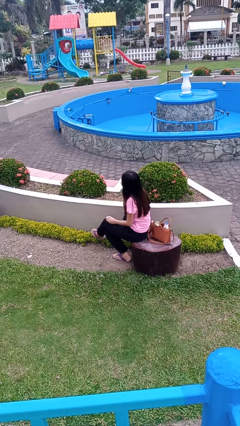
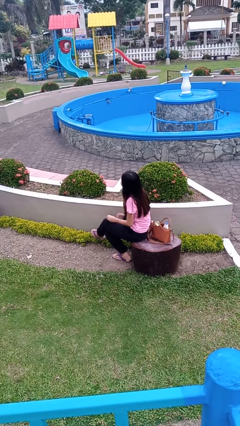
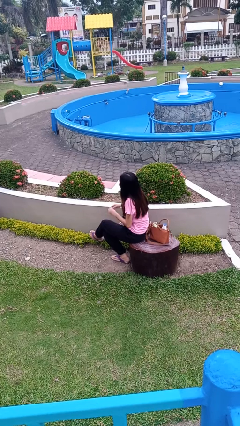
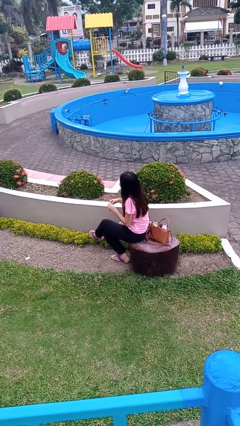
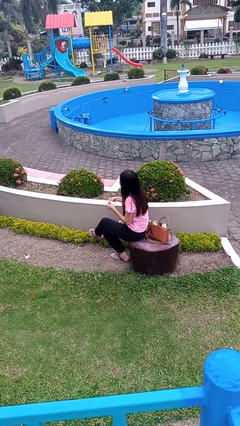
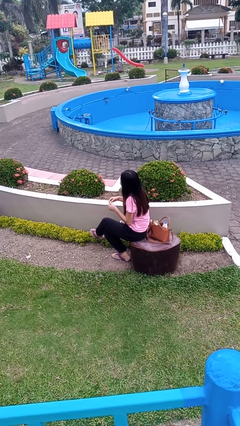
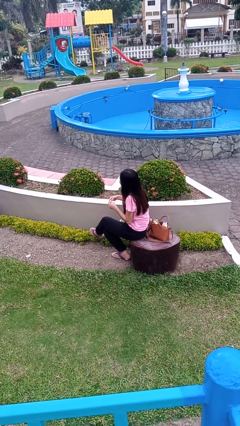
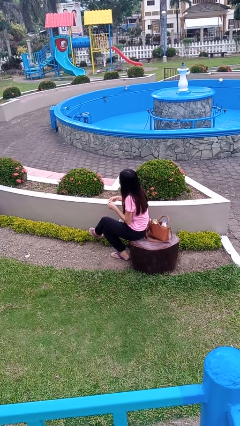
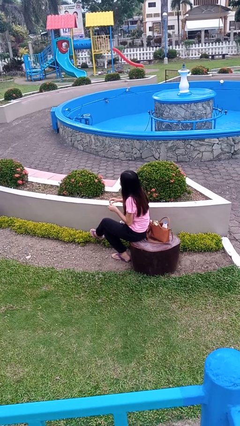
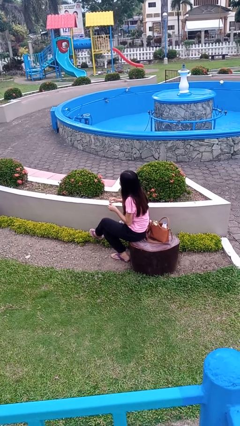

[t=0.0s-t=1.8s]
person takes medicine pills

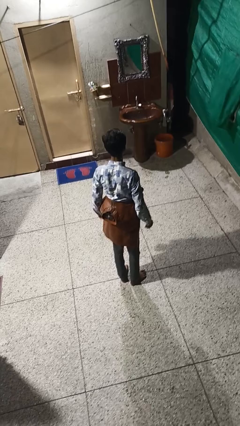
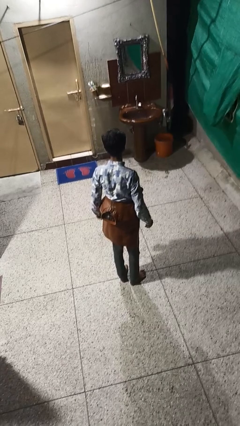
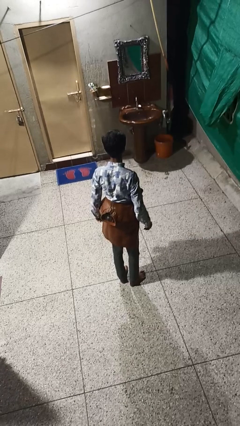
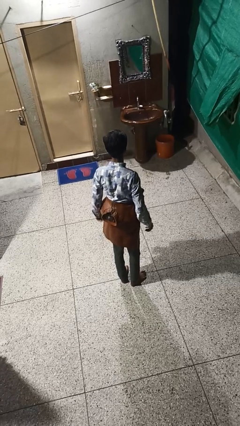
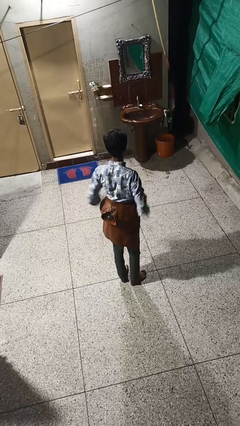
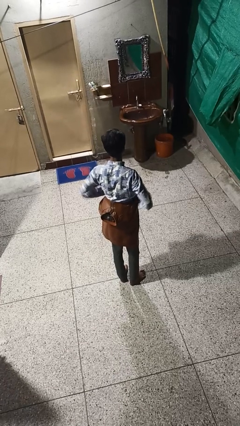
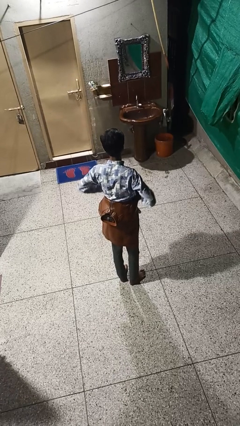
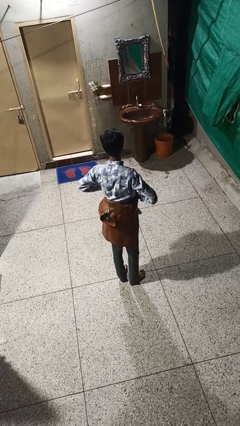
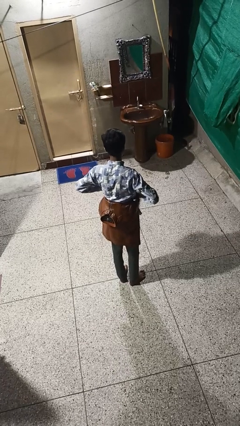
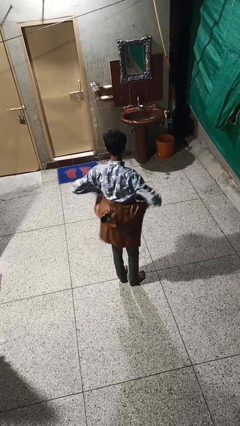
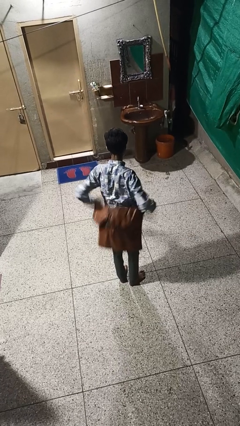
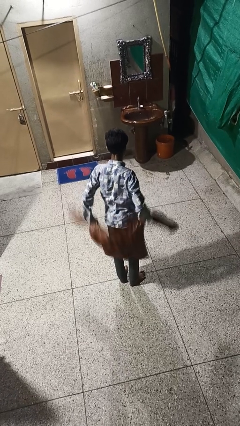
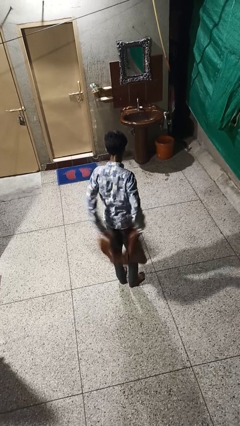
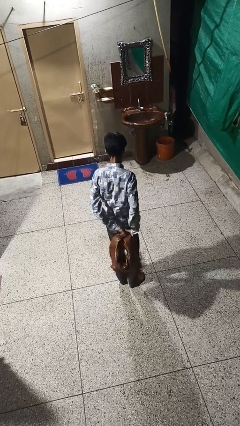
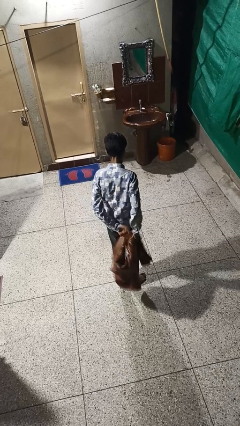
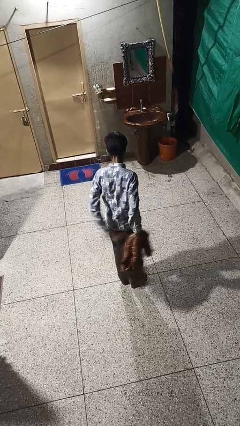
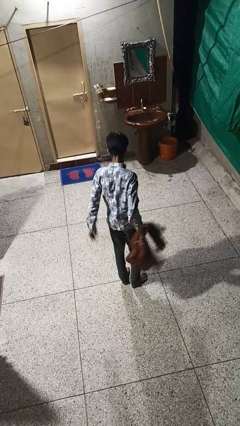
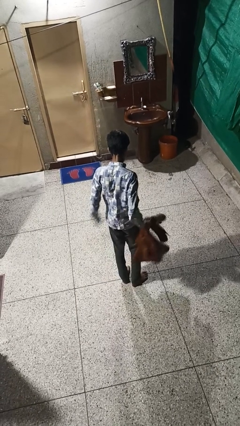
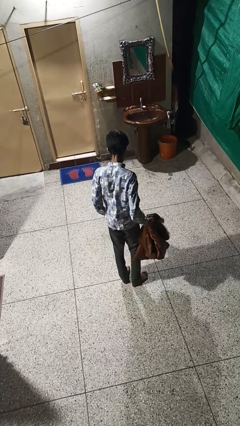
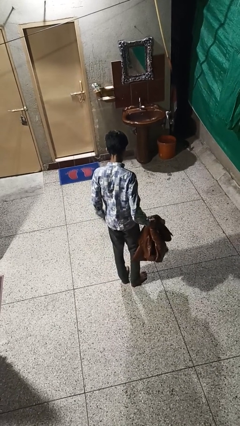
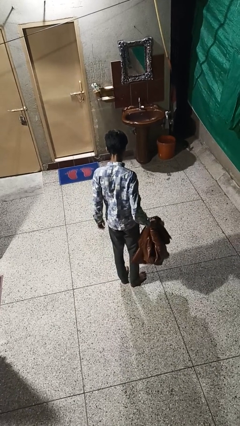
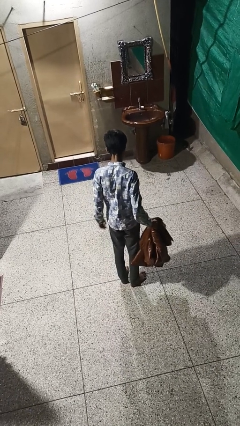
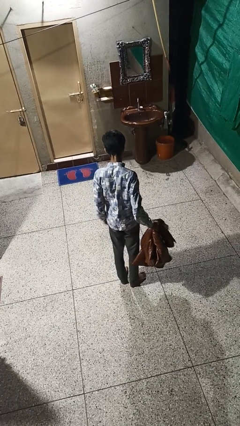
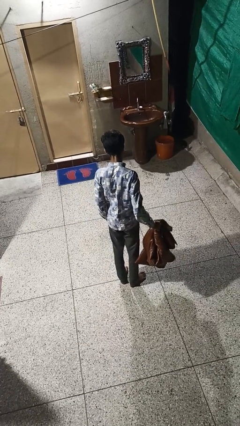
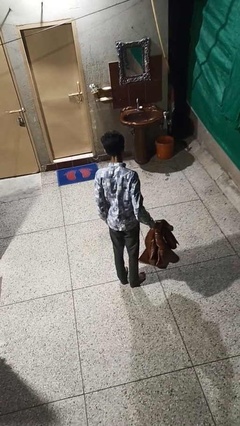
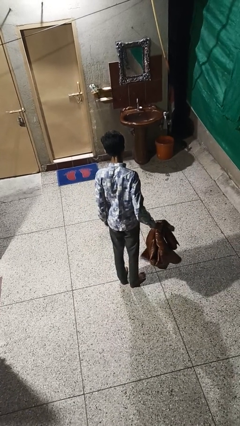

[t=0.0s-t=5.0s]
person unties jacket around waist

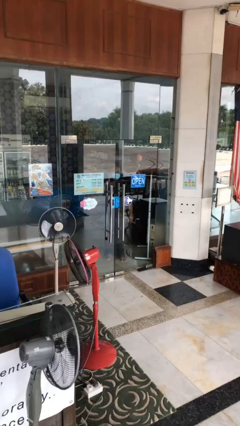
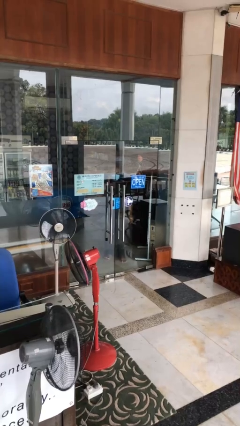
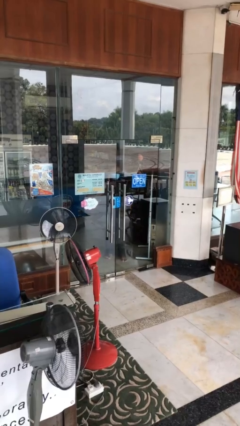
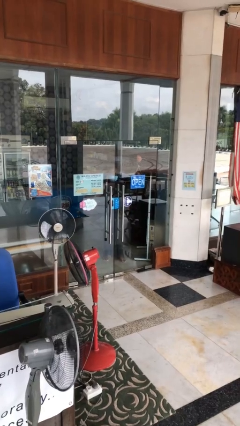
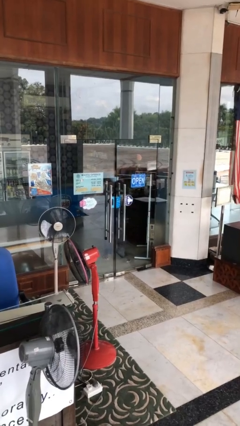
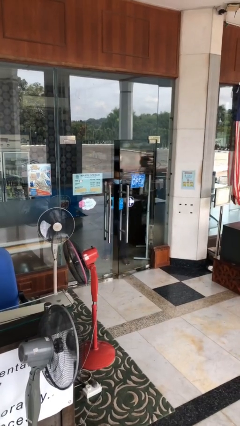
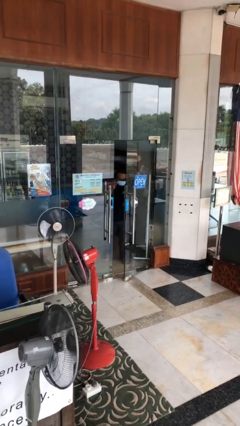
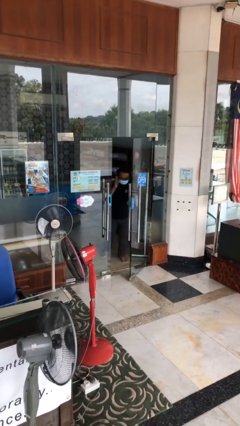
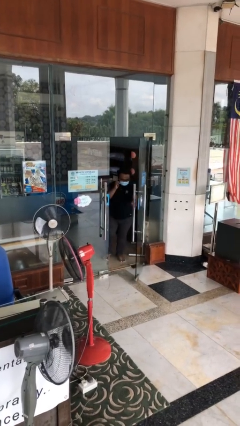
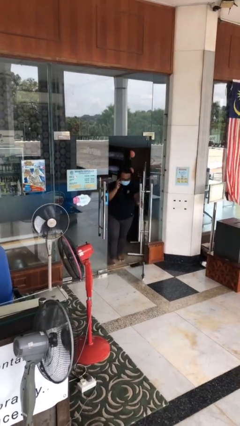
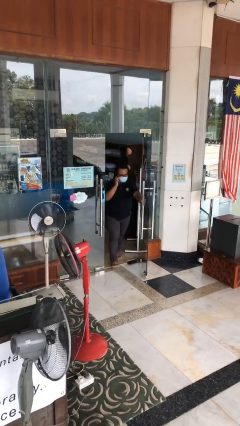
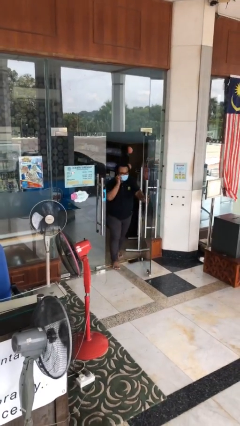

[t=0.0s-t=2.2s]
person opens facility door

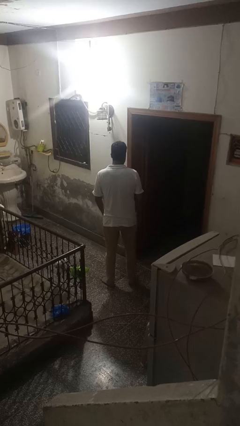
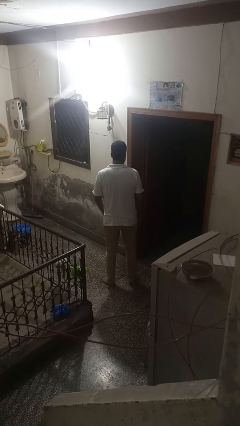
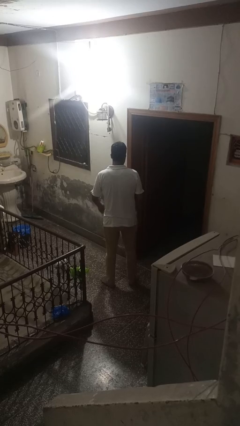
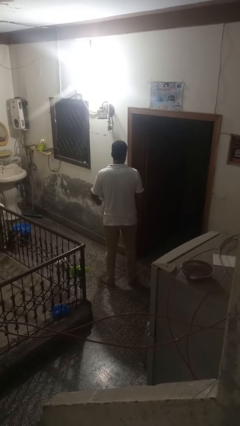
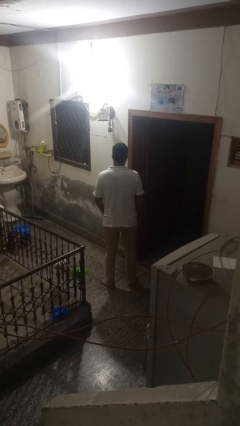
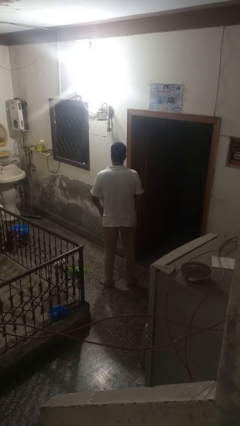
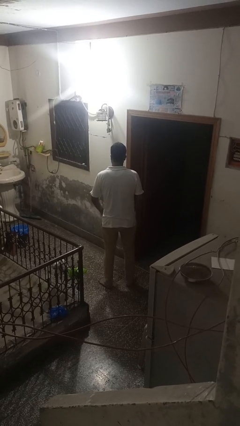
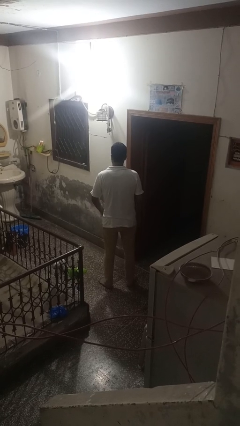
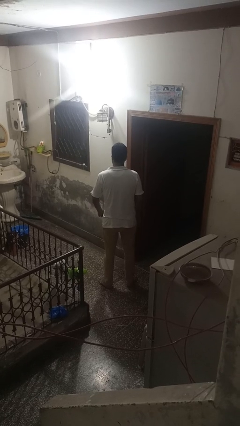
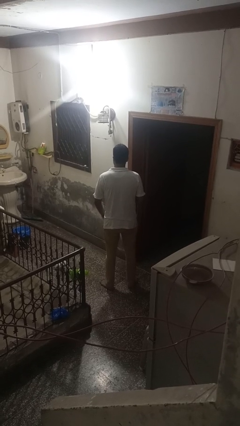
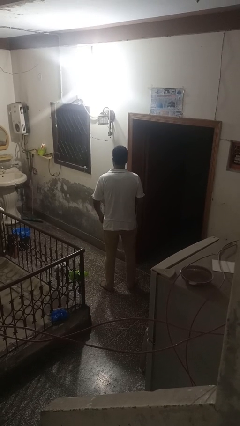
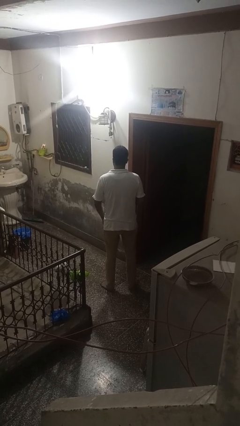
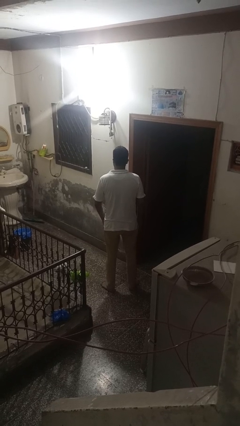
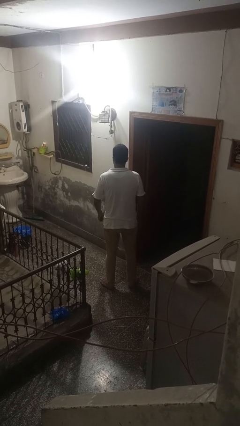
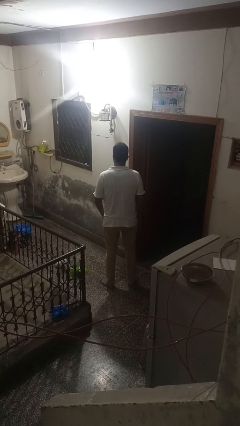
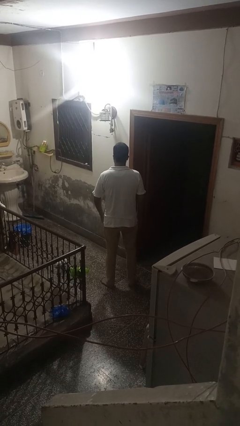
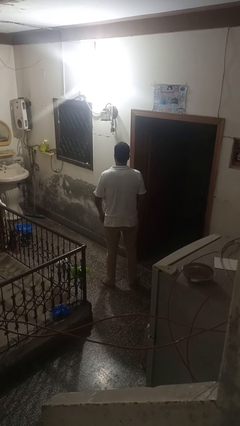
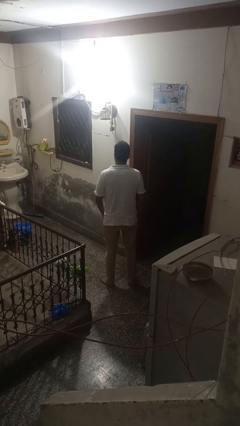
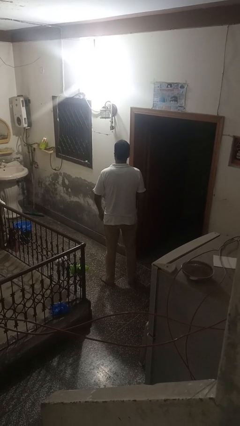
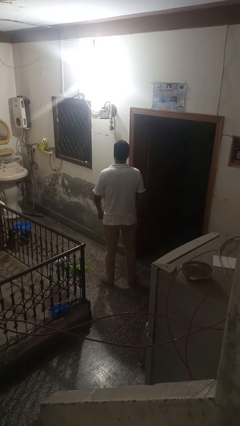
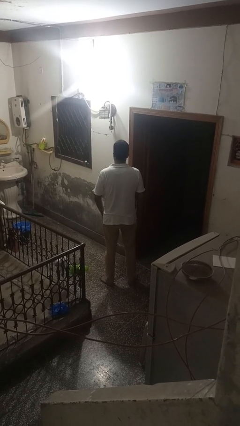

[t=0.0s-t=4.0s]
person slaps hands on thighs

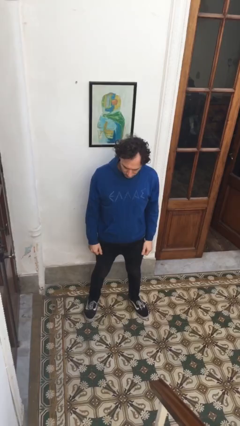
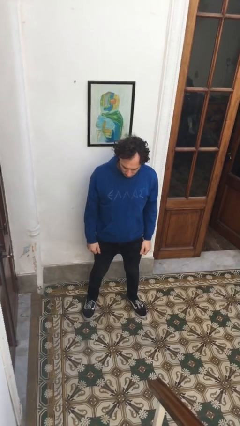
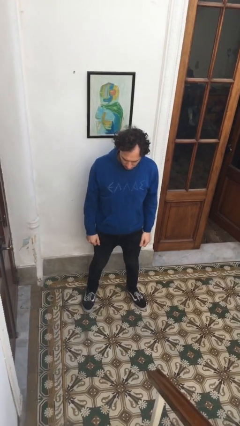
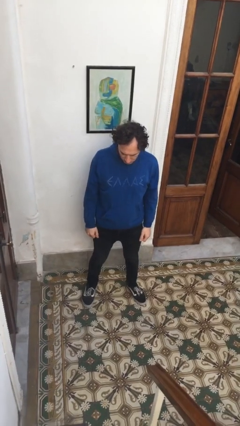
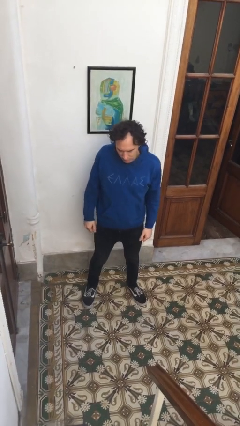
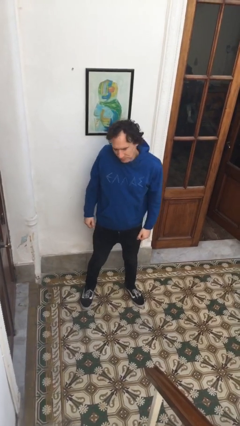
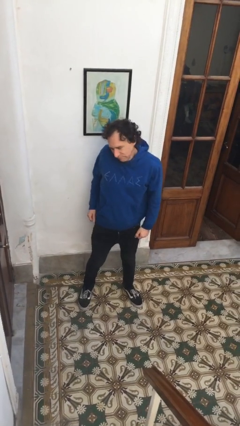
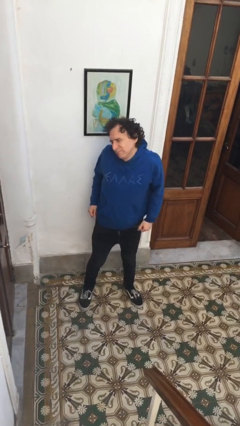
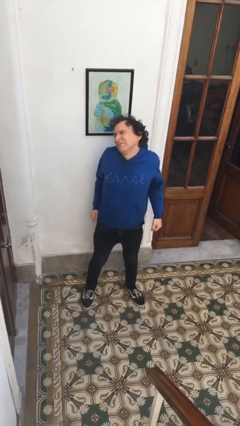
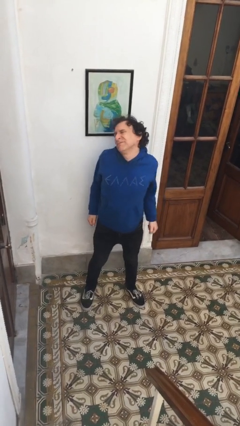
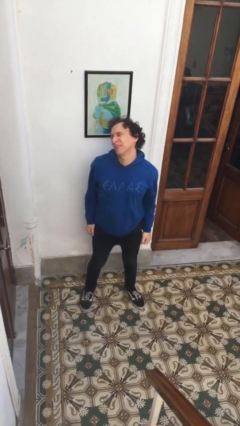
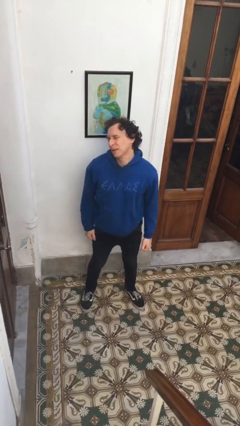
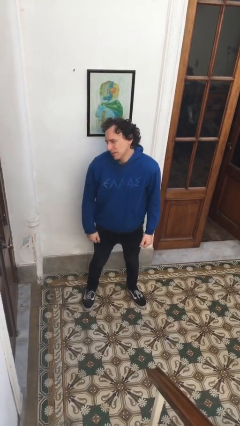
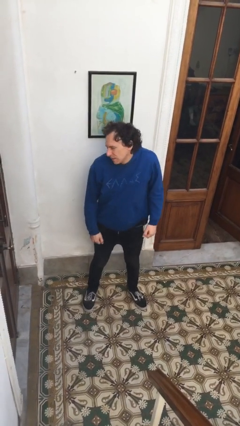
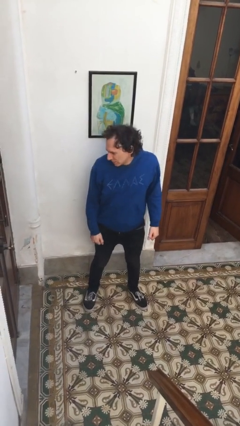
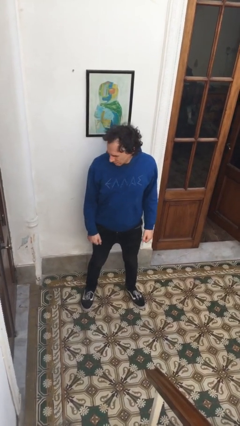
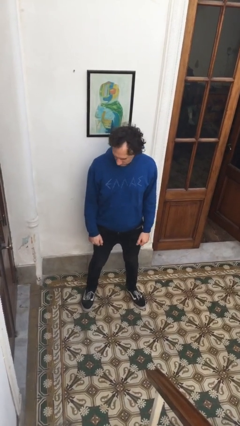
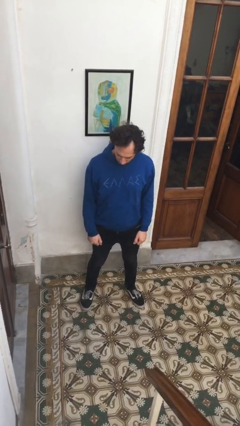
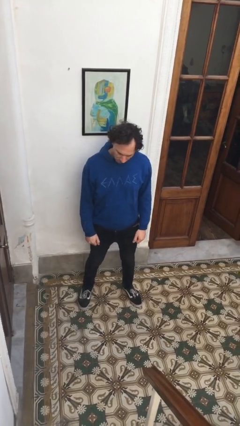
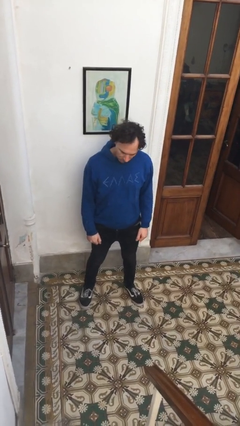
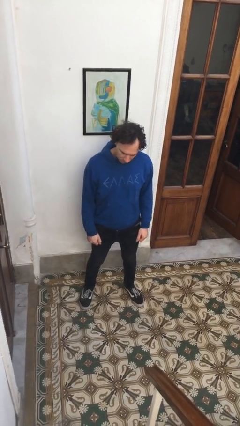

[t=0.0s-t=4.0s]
person stretches back

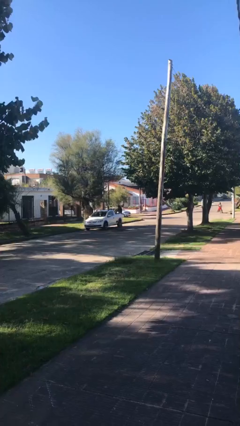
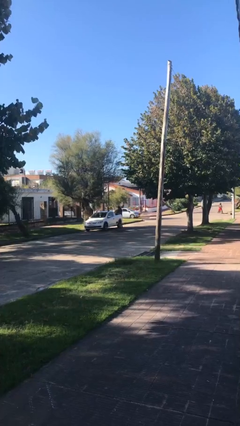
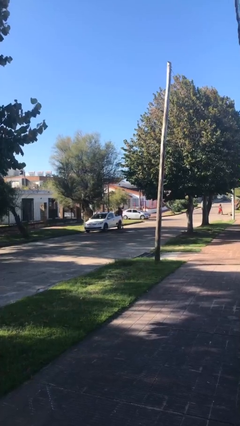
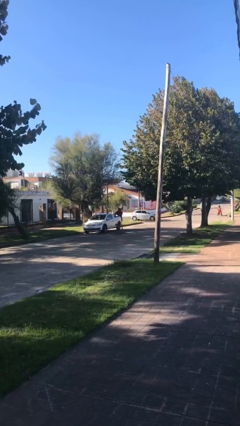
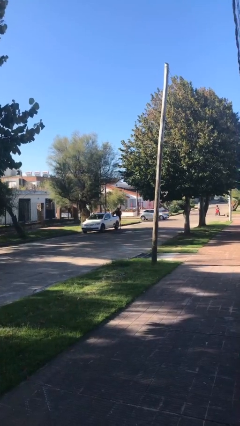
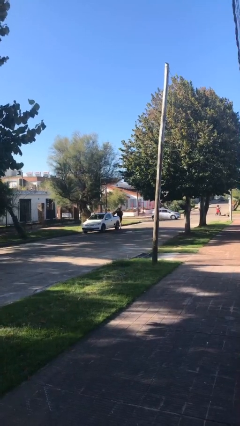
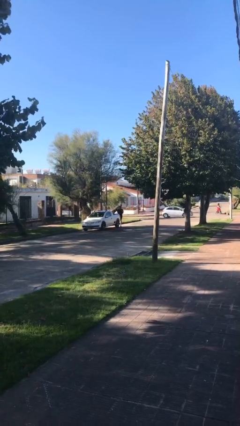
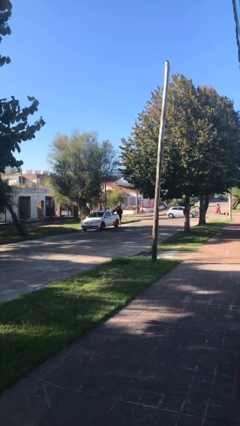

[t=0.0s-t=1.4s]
person unloads car
